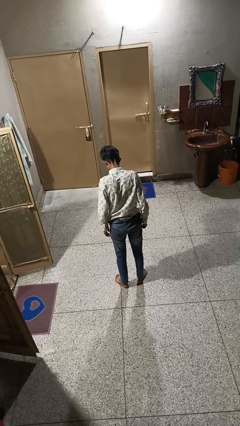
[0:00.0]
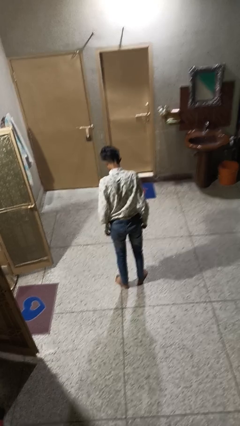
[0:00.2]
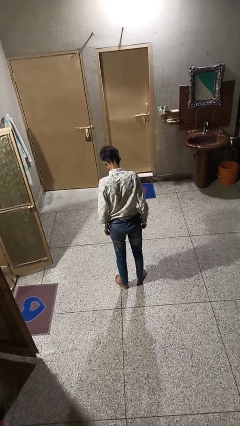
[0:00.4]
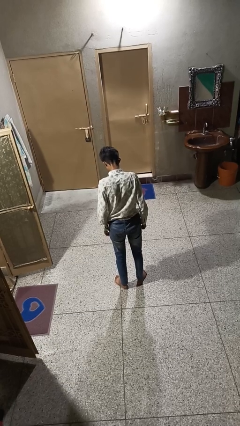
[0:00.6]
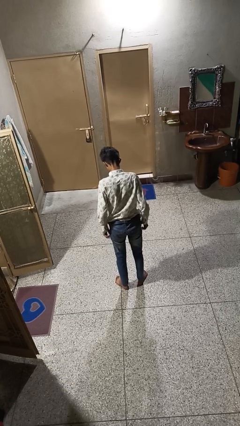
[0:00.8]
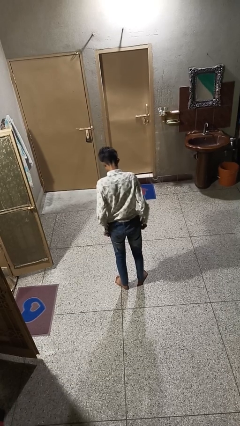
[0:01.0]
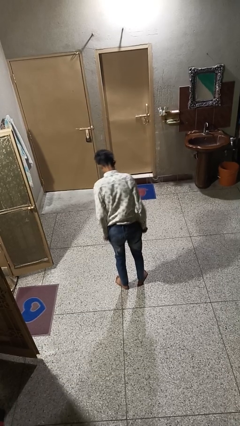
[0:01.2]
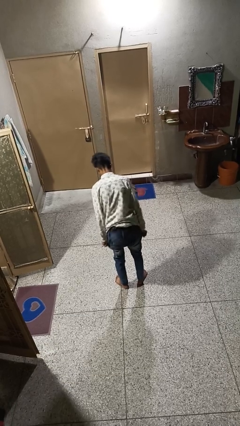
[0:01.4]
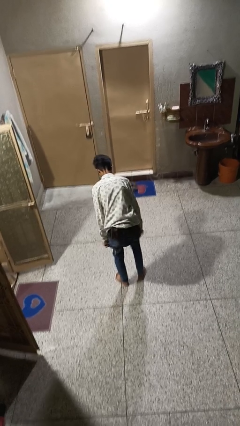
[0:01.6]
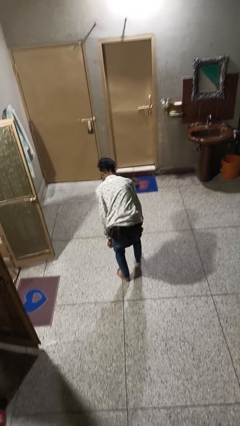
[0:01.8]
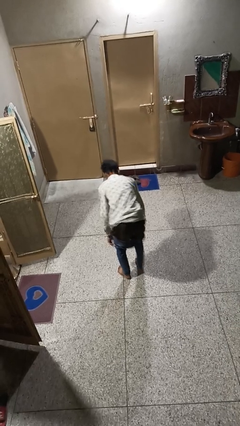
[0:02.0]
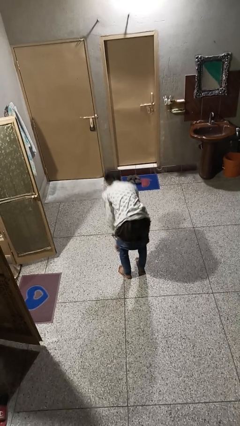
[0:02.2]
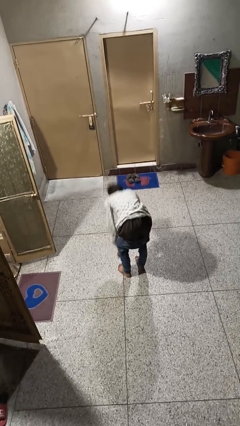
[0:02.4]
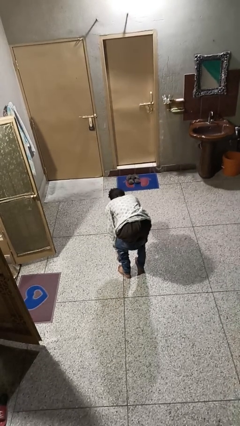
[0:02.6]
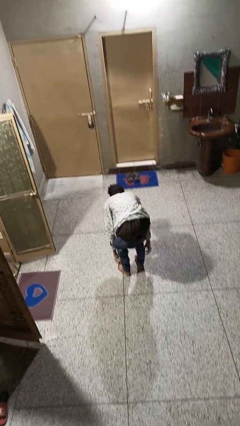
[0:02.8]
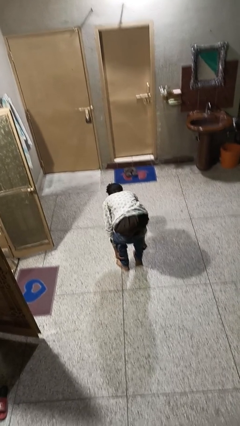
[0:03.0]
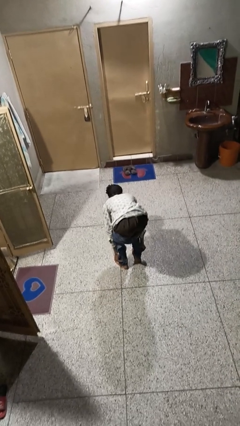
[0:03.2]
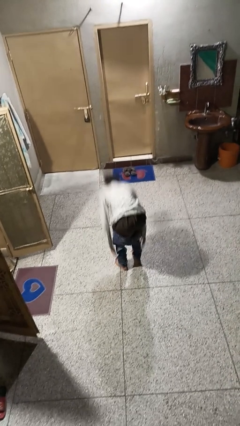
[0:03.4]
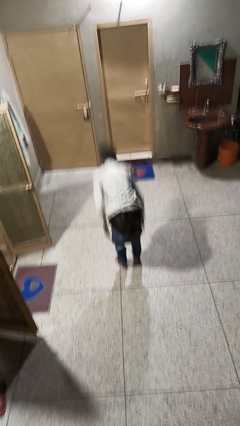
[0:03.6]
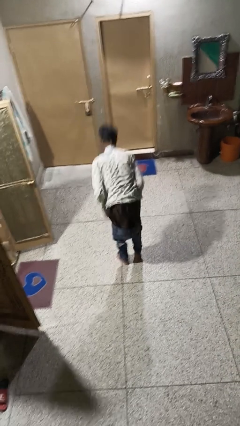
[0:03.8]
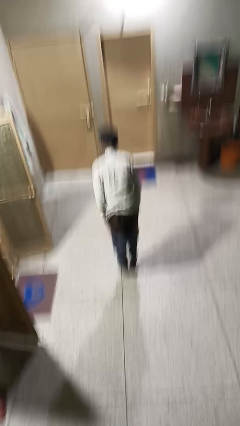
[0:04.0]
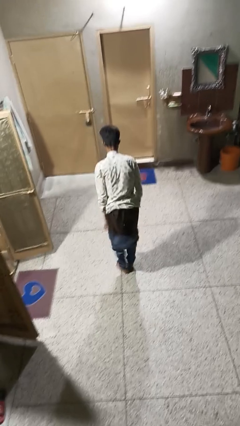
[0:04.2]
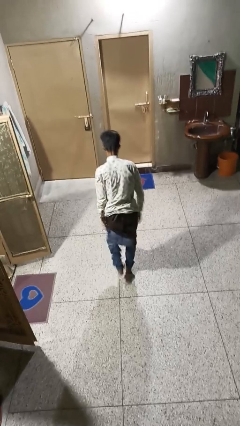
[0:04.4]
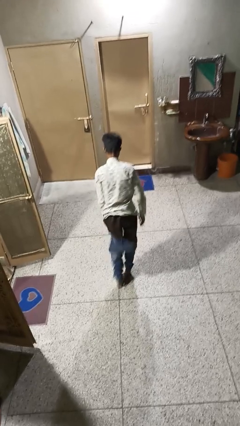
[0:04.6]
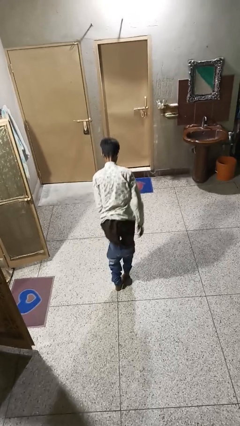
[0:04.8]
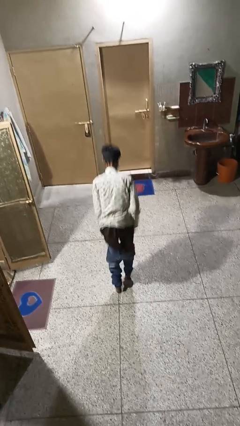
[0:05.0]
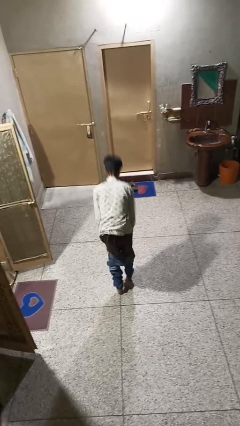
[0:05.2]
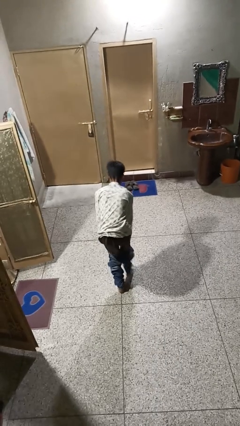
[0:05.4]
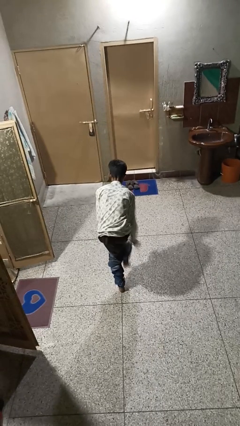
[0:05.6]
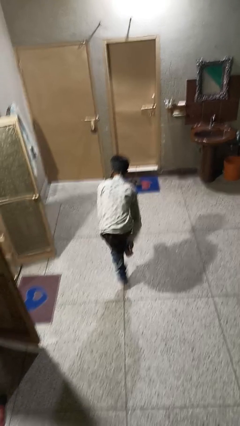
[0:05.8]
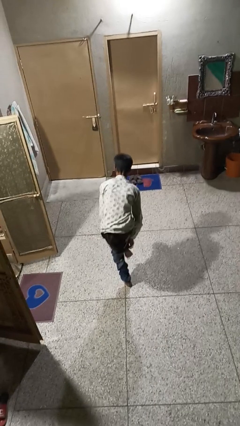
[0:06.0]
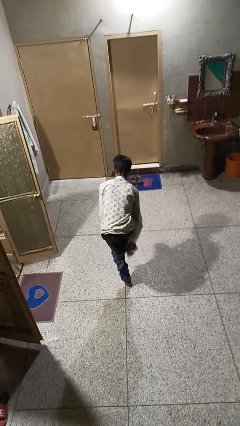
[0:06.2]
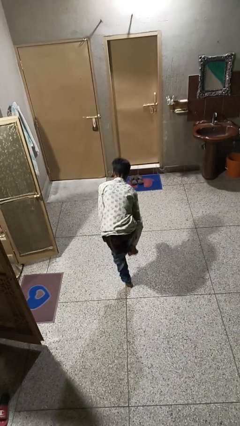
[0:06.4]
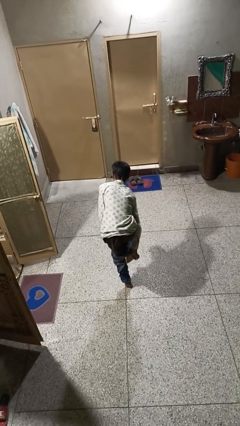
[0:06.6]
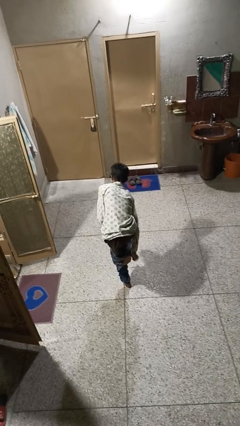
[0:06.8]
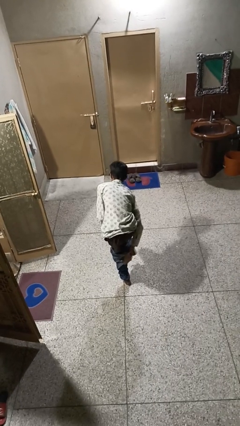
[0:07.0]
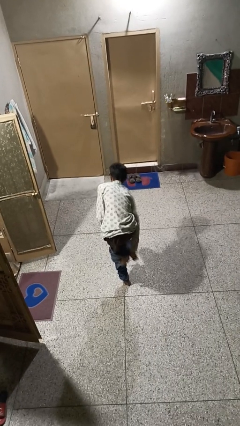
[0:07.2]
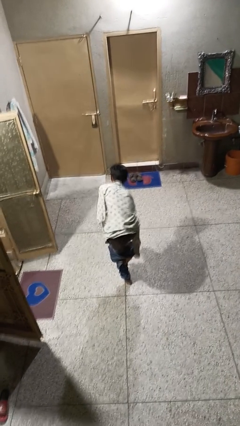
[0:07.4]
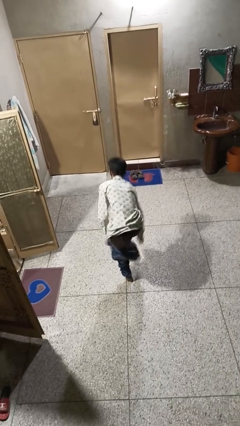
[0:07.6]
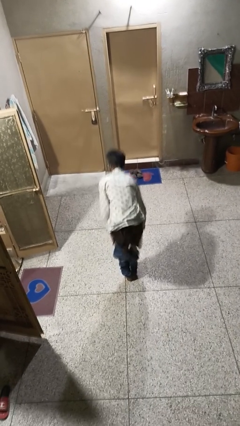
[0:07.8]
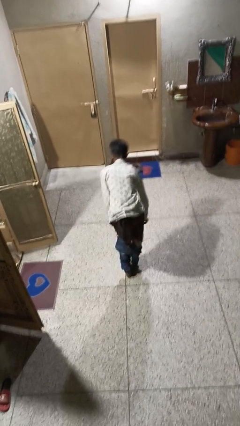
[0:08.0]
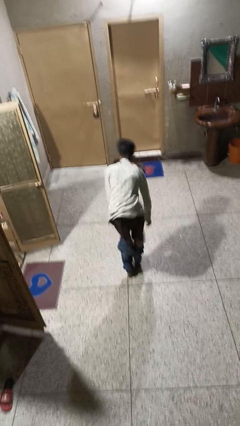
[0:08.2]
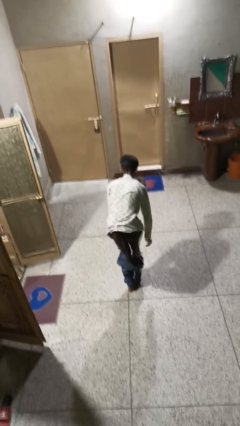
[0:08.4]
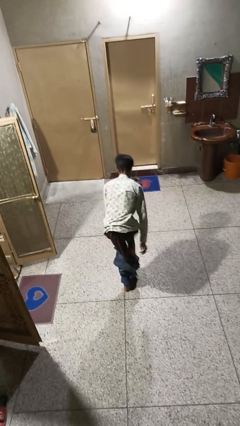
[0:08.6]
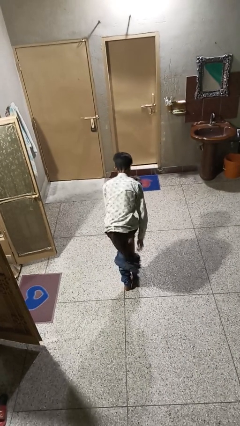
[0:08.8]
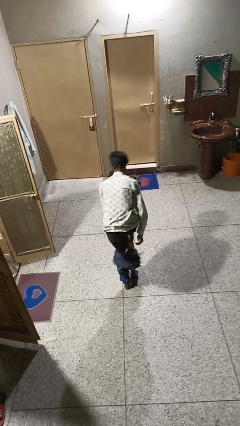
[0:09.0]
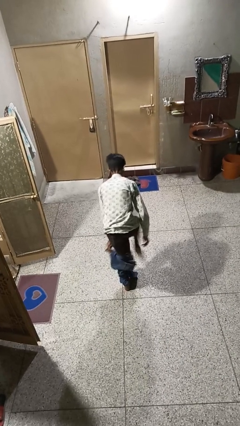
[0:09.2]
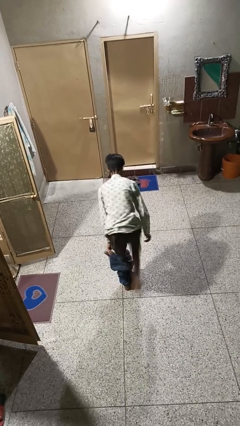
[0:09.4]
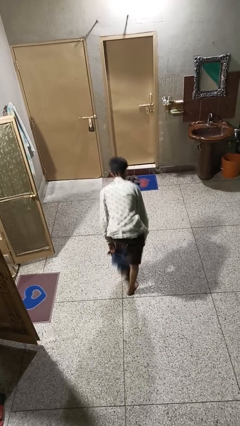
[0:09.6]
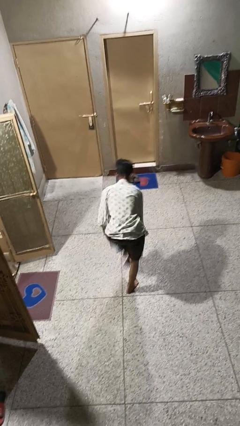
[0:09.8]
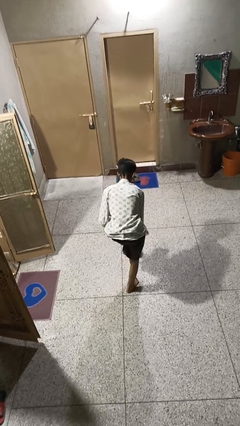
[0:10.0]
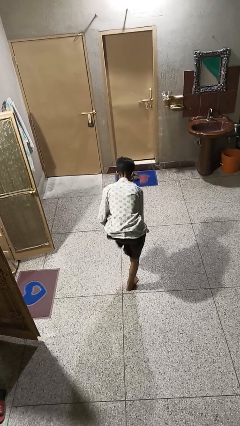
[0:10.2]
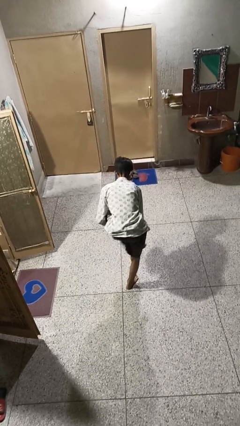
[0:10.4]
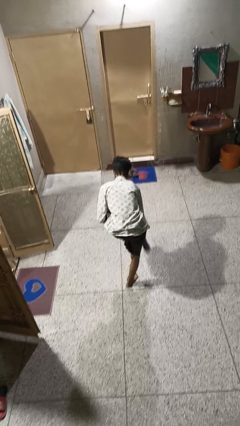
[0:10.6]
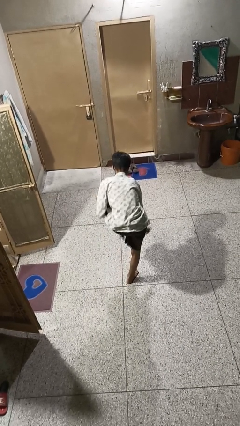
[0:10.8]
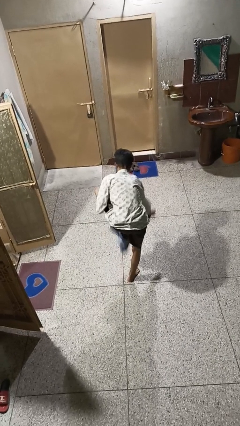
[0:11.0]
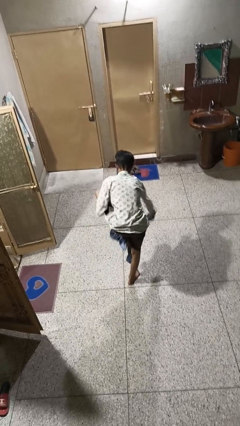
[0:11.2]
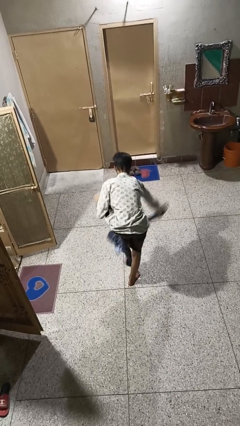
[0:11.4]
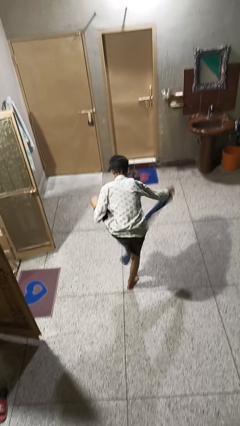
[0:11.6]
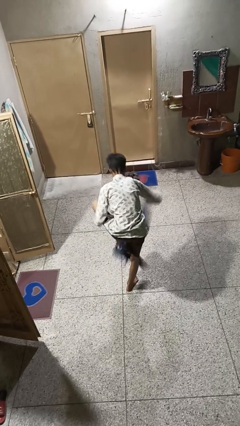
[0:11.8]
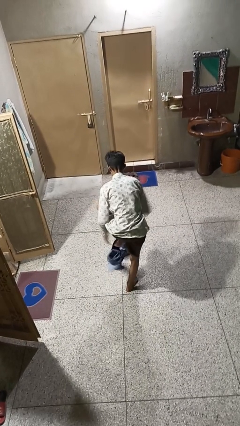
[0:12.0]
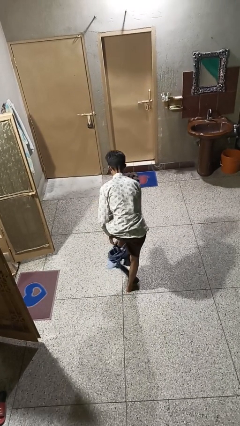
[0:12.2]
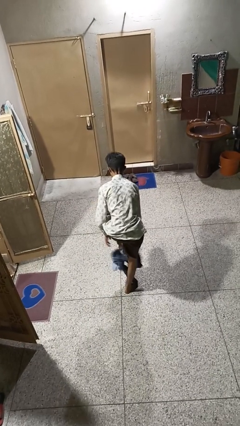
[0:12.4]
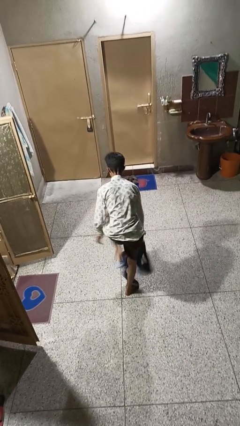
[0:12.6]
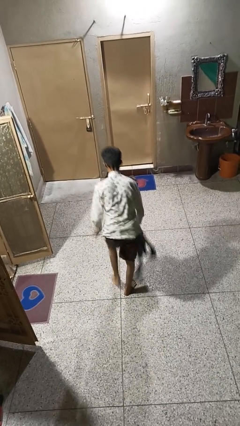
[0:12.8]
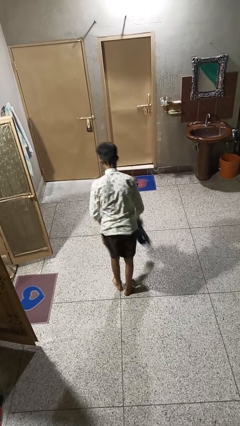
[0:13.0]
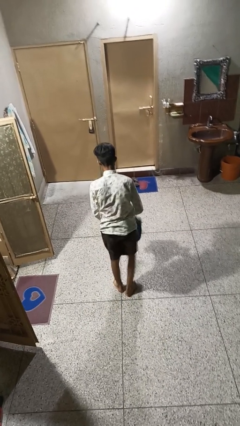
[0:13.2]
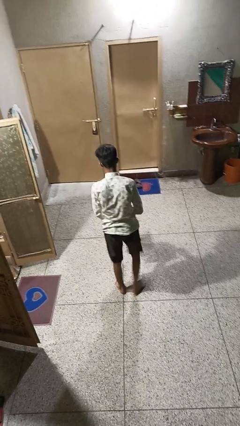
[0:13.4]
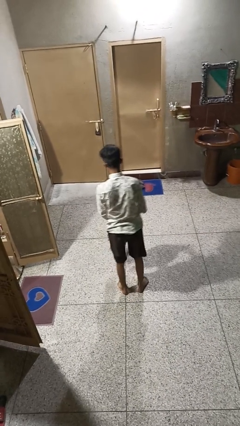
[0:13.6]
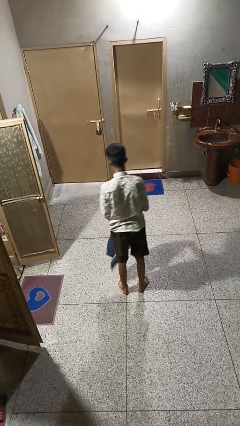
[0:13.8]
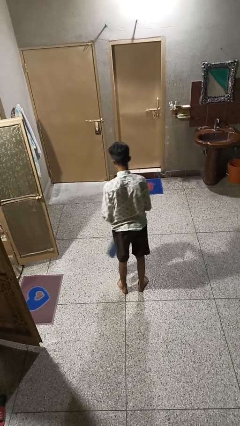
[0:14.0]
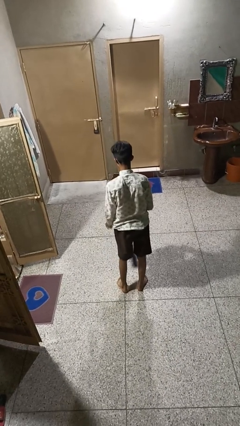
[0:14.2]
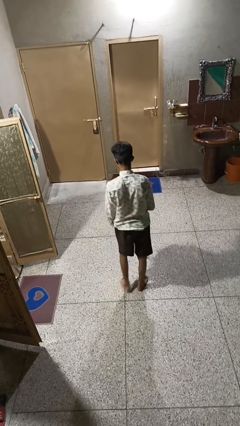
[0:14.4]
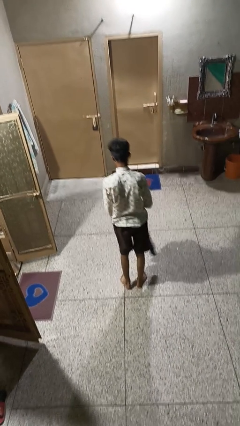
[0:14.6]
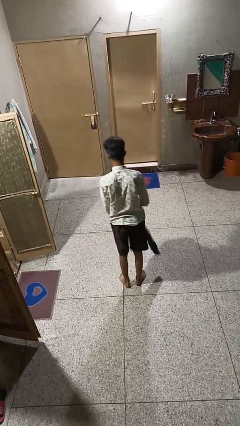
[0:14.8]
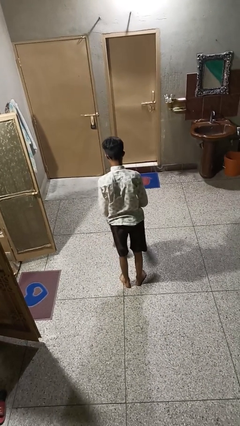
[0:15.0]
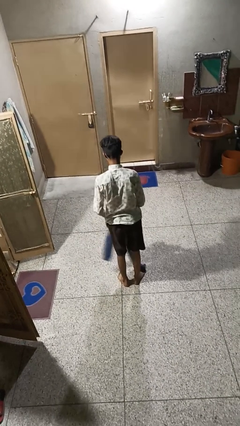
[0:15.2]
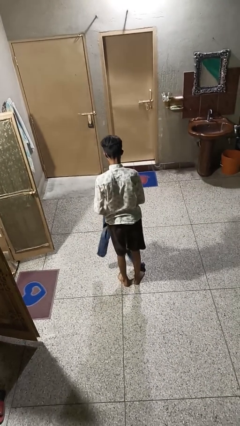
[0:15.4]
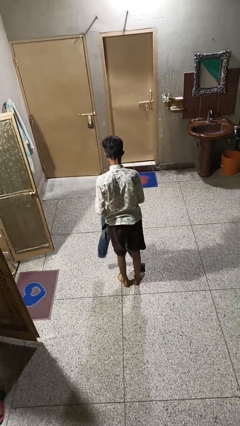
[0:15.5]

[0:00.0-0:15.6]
person takes off pants

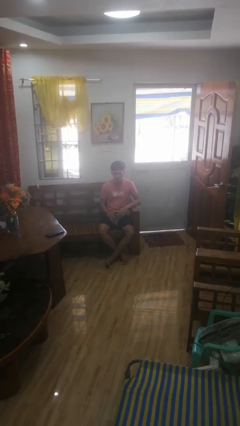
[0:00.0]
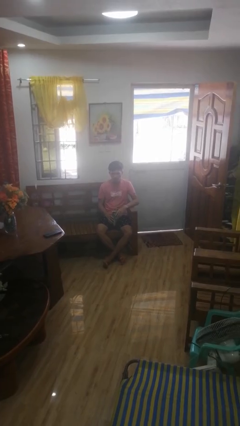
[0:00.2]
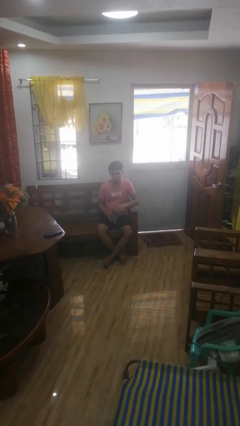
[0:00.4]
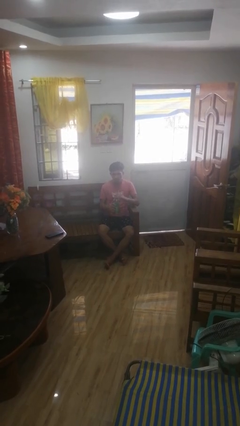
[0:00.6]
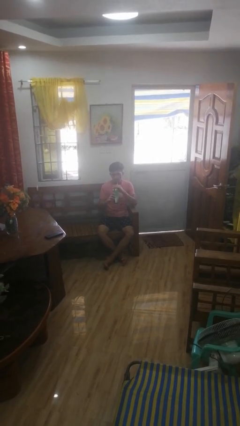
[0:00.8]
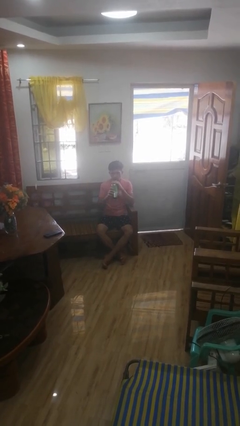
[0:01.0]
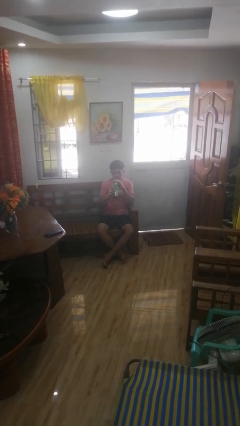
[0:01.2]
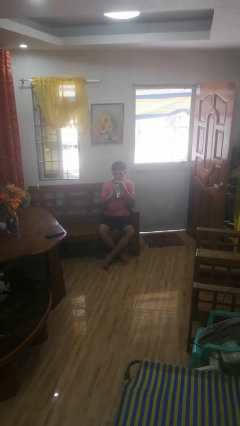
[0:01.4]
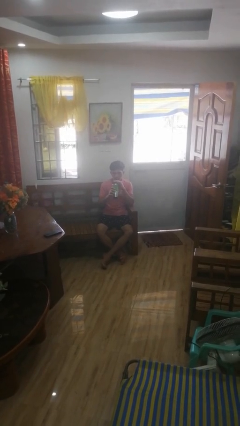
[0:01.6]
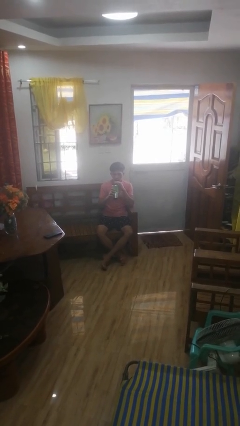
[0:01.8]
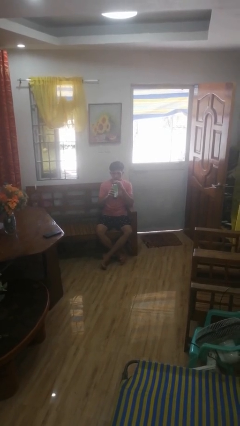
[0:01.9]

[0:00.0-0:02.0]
person drinks from straw

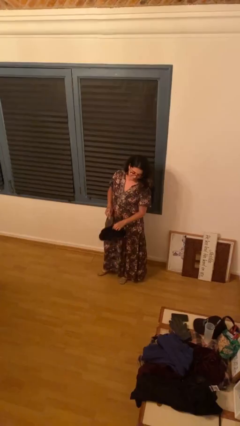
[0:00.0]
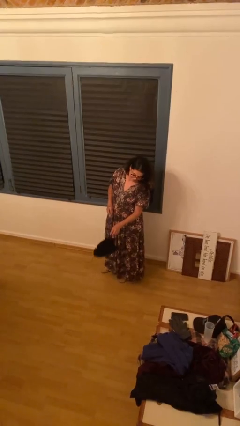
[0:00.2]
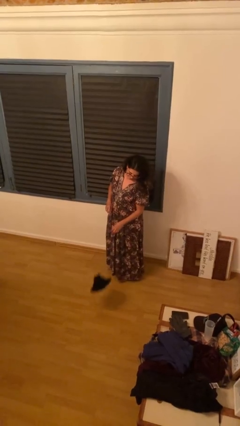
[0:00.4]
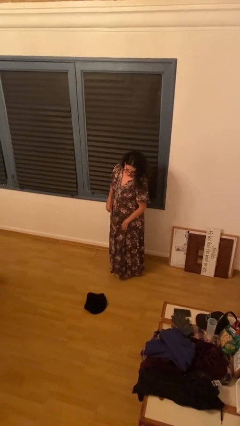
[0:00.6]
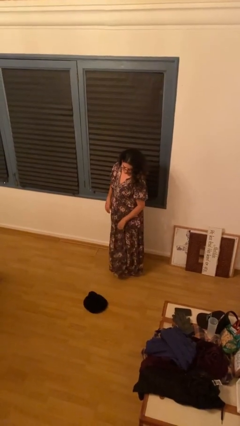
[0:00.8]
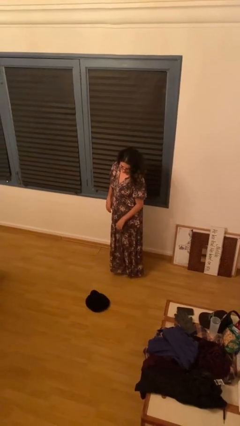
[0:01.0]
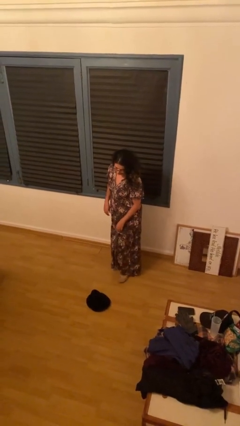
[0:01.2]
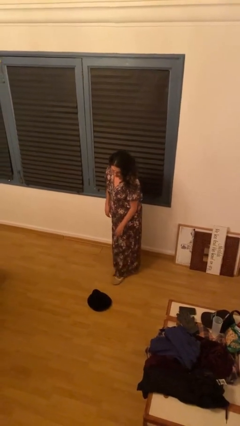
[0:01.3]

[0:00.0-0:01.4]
person drops object
